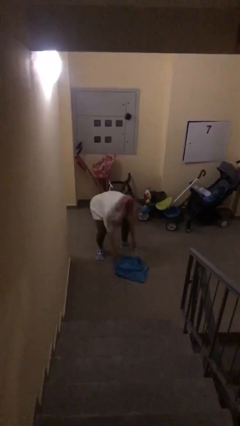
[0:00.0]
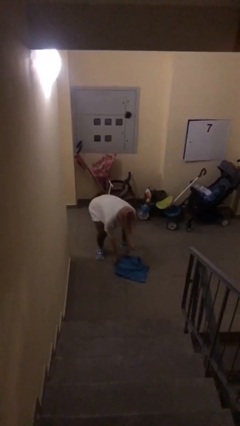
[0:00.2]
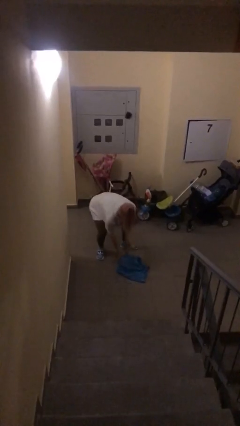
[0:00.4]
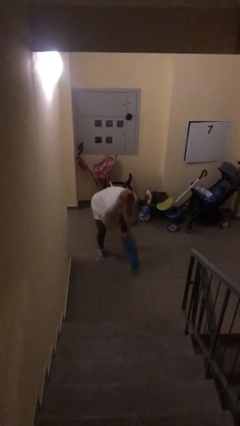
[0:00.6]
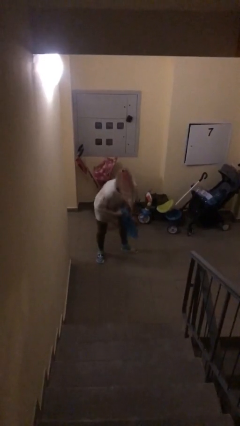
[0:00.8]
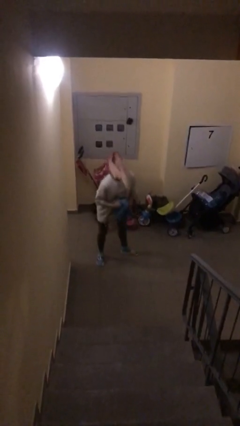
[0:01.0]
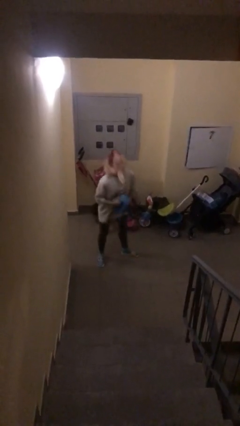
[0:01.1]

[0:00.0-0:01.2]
person picks up object from floor

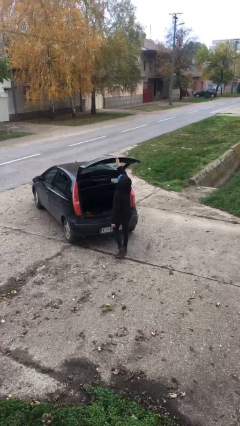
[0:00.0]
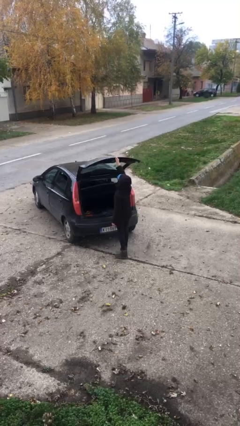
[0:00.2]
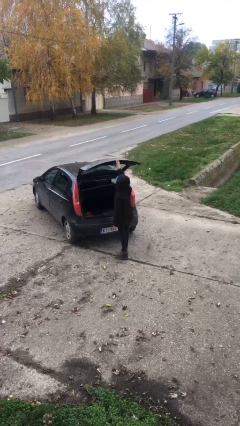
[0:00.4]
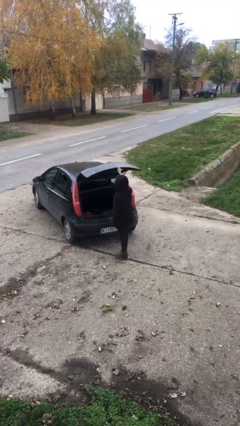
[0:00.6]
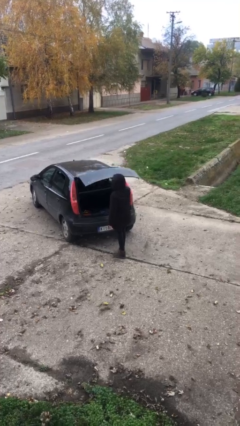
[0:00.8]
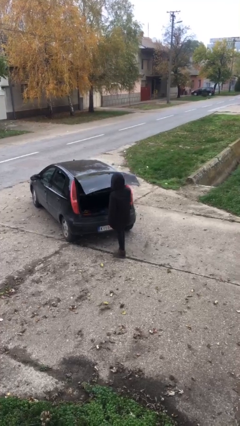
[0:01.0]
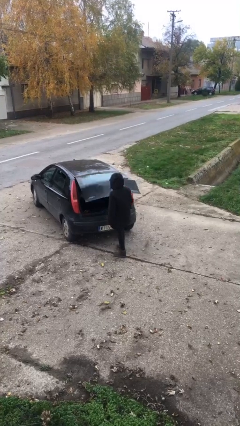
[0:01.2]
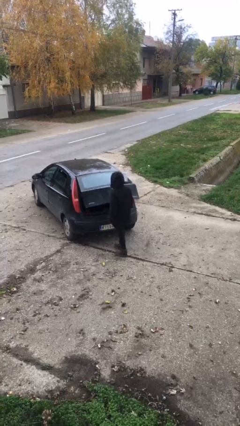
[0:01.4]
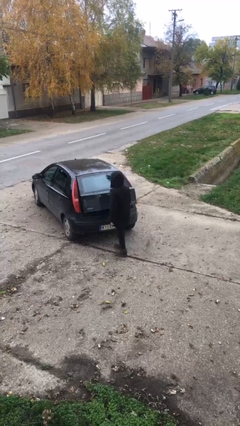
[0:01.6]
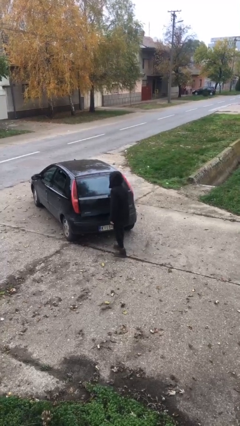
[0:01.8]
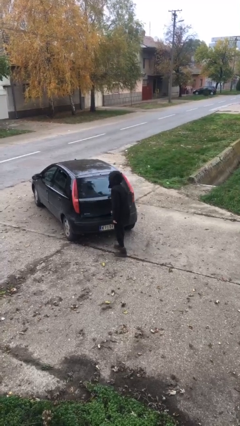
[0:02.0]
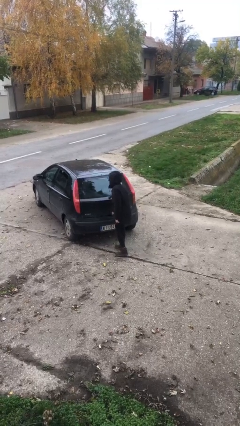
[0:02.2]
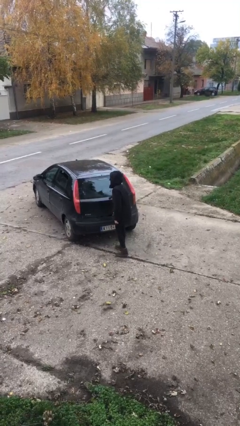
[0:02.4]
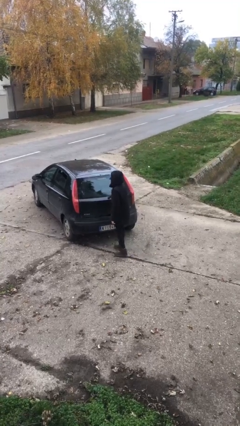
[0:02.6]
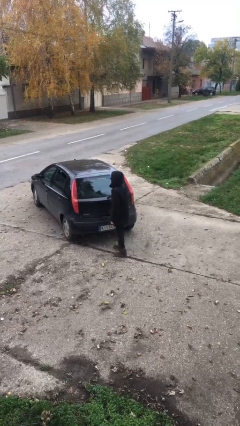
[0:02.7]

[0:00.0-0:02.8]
person closes car trunk

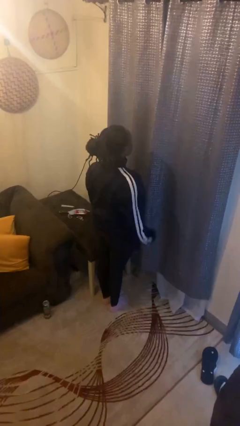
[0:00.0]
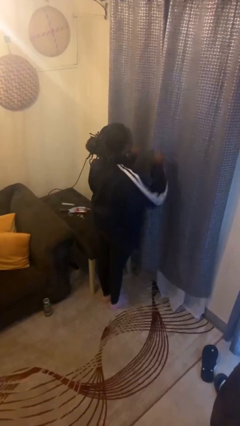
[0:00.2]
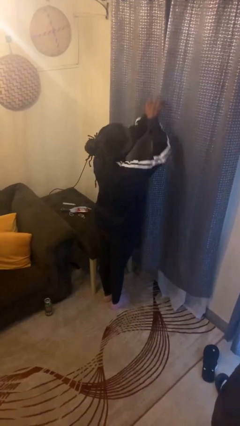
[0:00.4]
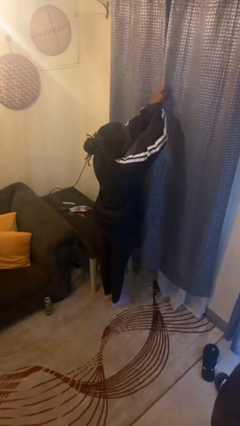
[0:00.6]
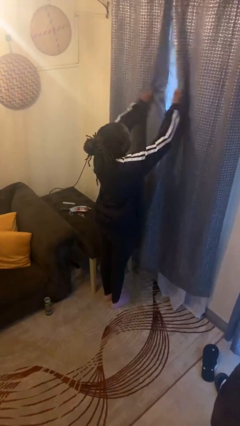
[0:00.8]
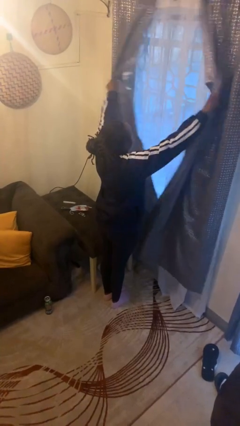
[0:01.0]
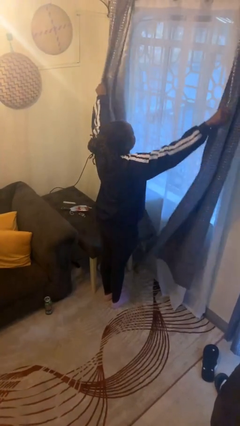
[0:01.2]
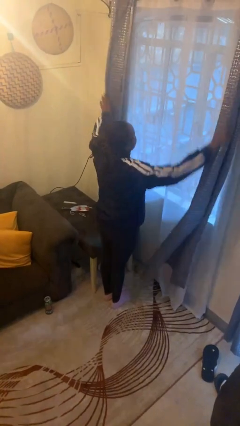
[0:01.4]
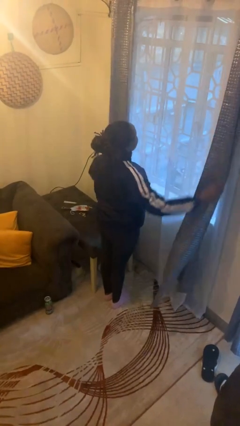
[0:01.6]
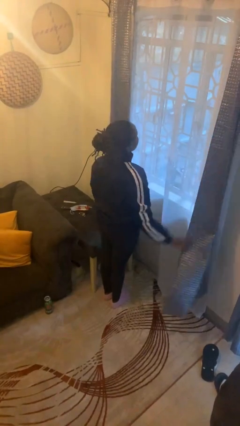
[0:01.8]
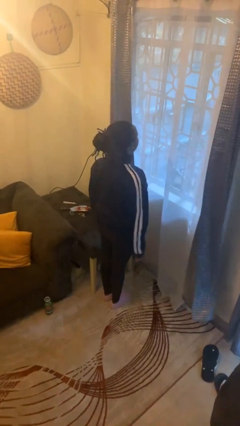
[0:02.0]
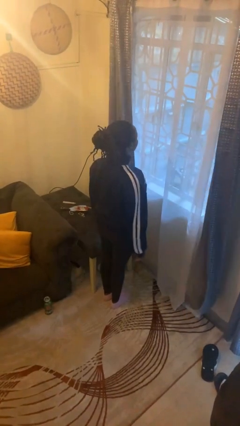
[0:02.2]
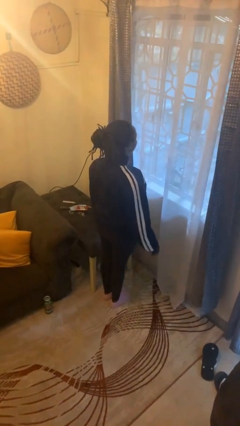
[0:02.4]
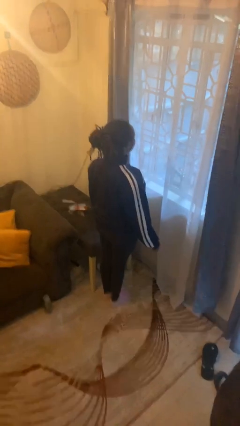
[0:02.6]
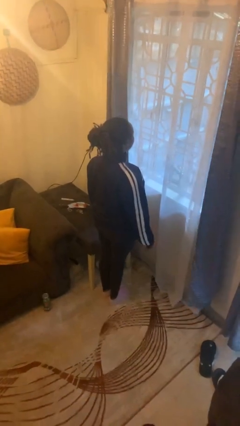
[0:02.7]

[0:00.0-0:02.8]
person opens curtains

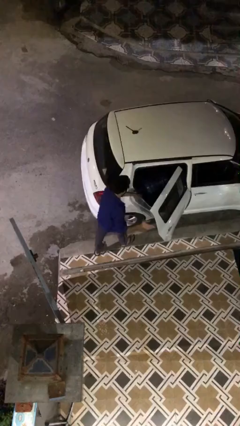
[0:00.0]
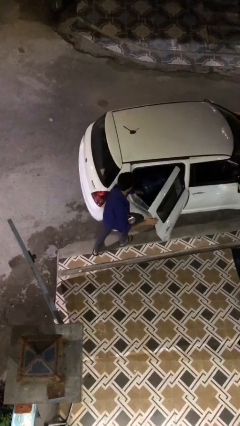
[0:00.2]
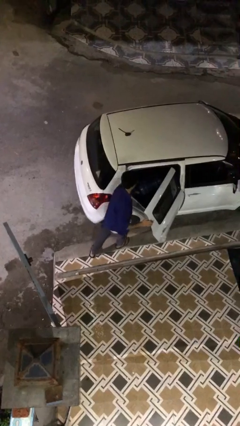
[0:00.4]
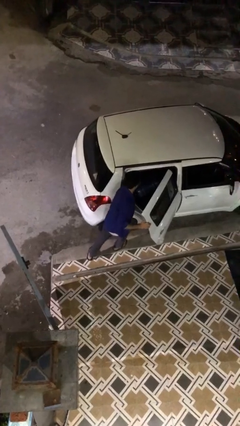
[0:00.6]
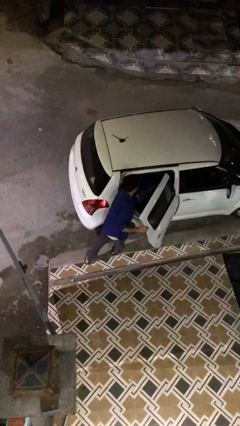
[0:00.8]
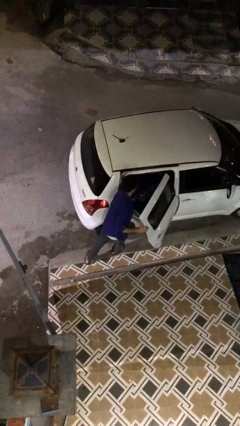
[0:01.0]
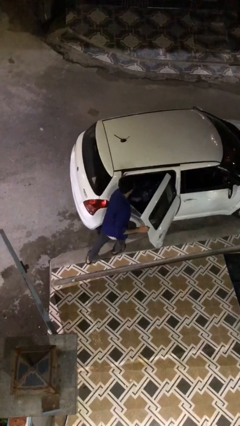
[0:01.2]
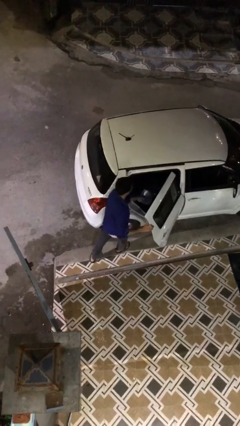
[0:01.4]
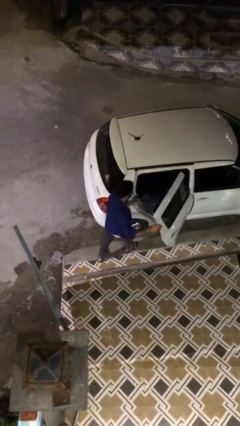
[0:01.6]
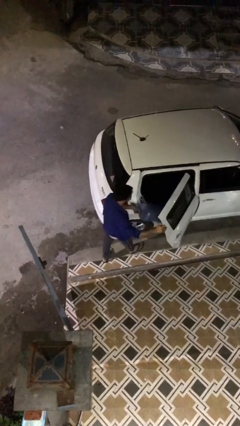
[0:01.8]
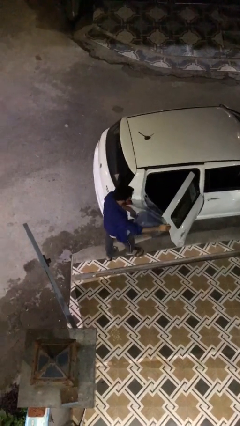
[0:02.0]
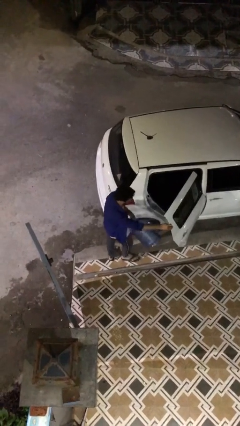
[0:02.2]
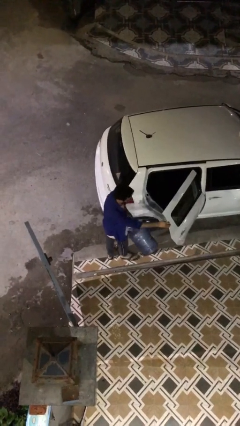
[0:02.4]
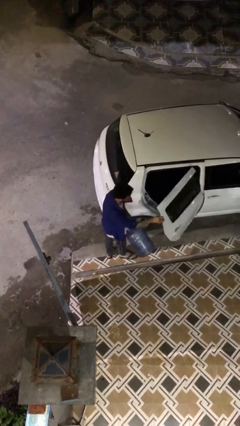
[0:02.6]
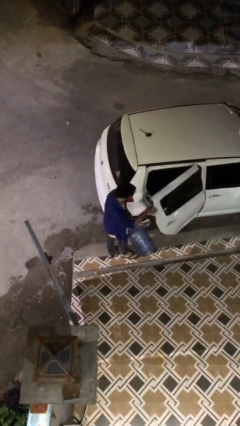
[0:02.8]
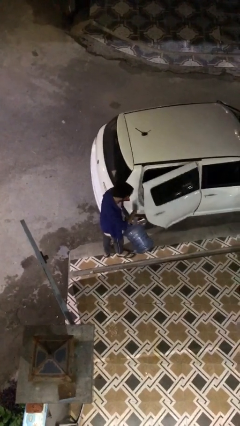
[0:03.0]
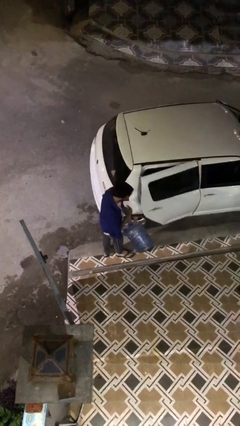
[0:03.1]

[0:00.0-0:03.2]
person unloads car

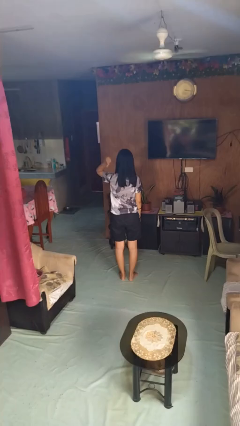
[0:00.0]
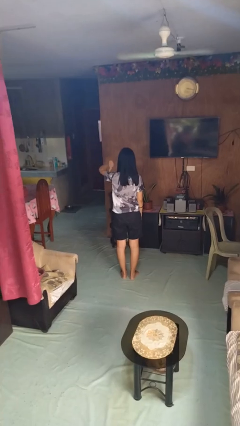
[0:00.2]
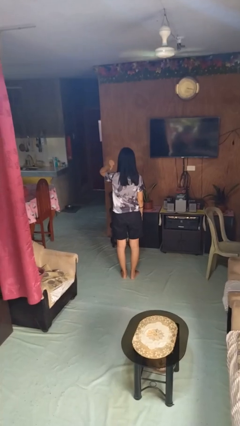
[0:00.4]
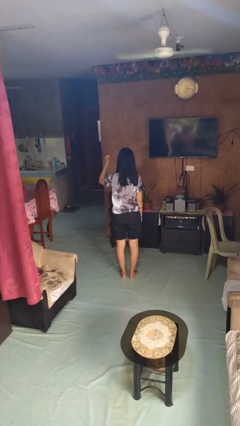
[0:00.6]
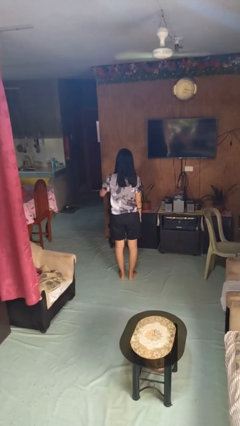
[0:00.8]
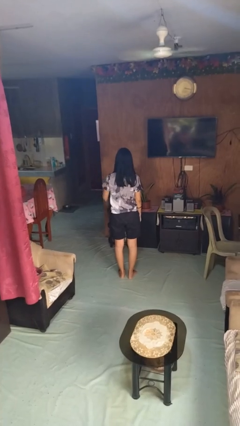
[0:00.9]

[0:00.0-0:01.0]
person gestures behind me

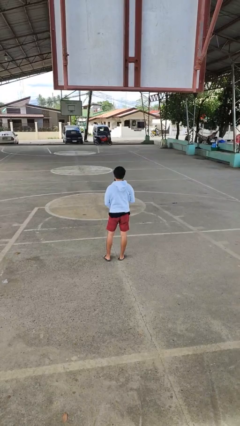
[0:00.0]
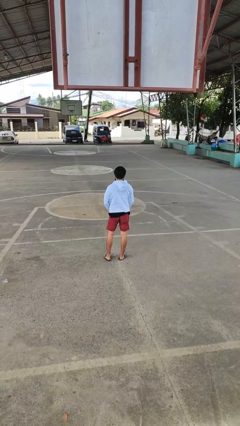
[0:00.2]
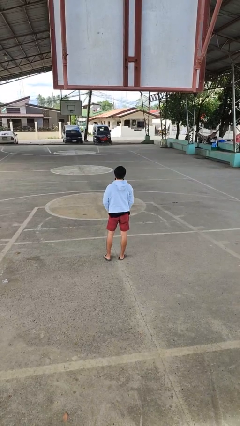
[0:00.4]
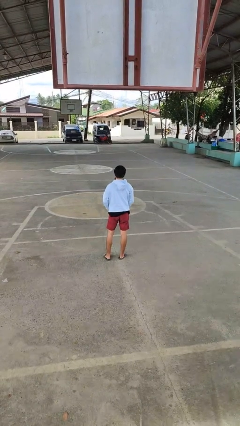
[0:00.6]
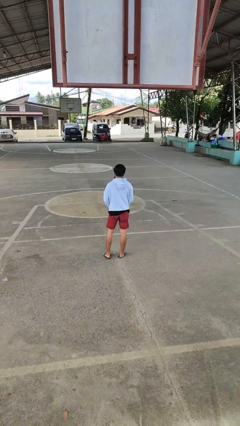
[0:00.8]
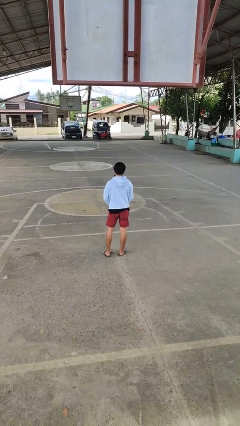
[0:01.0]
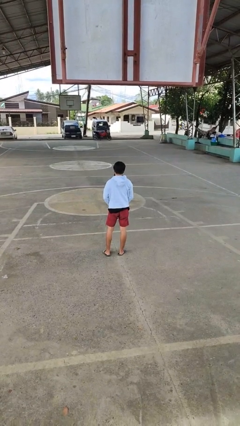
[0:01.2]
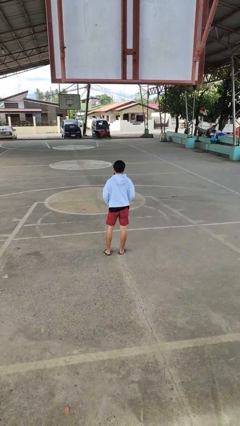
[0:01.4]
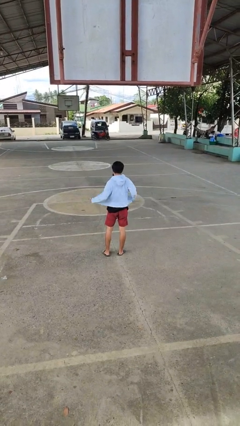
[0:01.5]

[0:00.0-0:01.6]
person unzips jacket

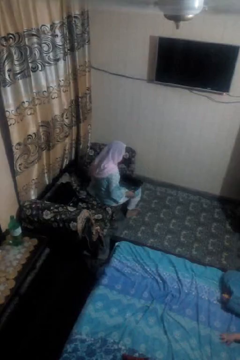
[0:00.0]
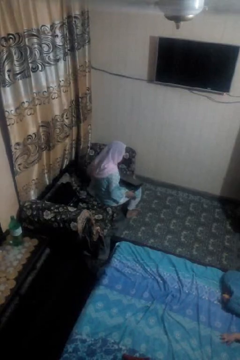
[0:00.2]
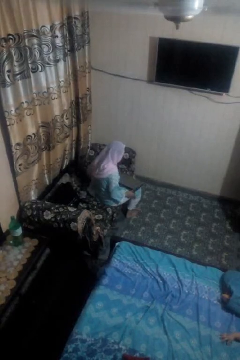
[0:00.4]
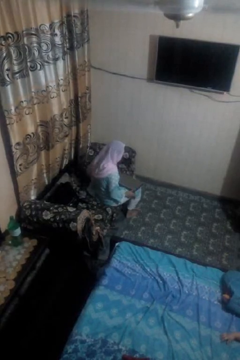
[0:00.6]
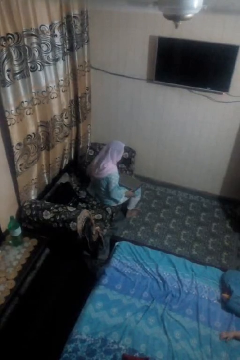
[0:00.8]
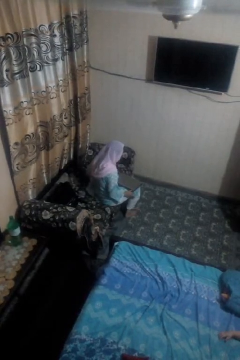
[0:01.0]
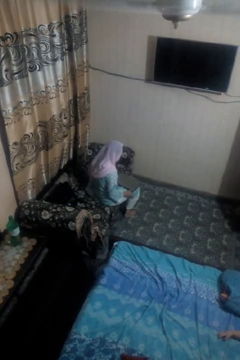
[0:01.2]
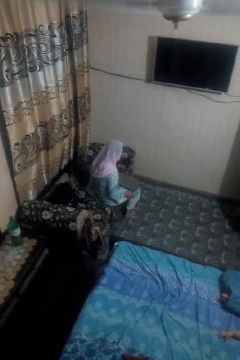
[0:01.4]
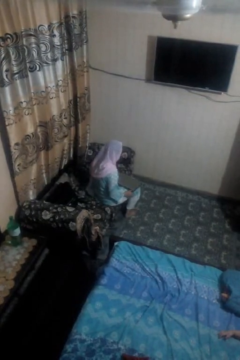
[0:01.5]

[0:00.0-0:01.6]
person closes laptop

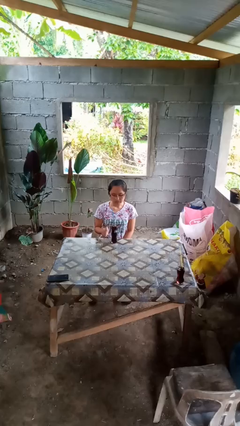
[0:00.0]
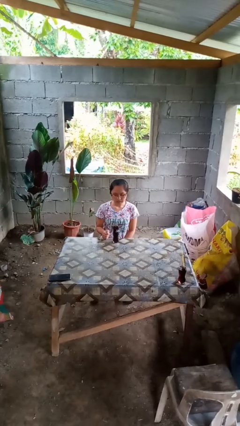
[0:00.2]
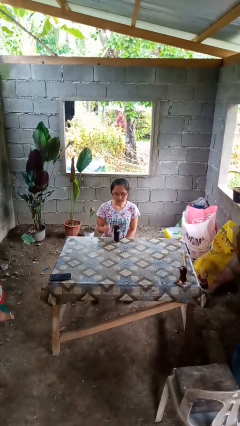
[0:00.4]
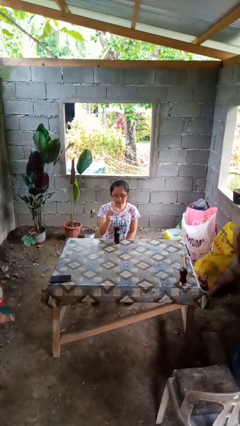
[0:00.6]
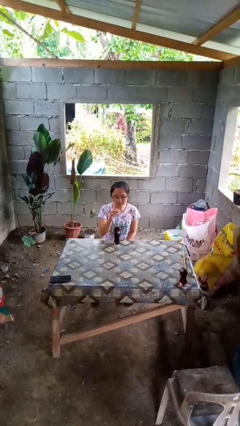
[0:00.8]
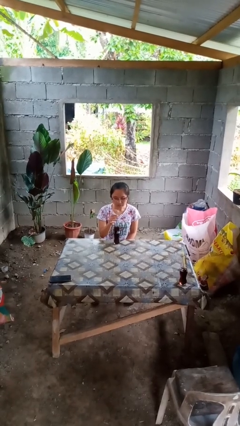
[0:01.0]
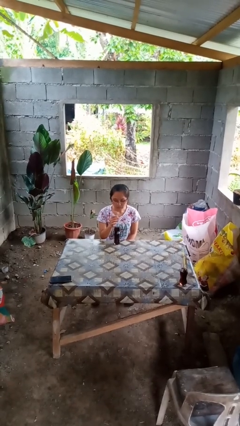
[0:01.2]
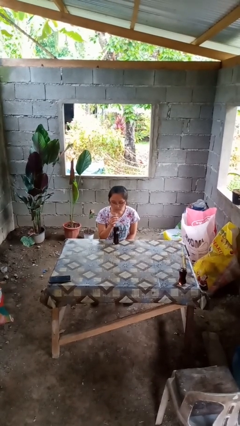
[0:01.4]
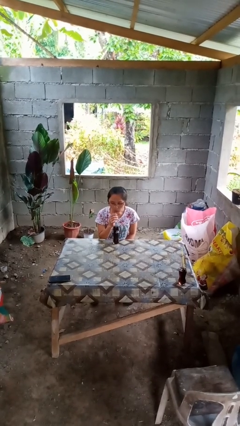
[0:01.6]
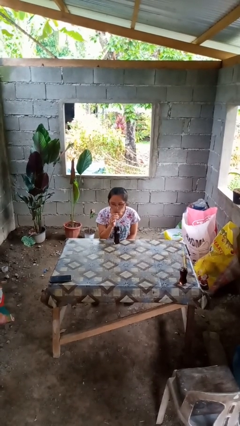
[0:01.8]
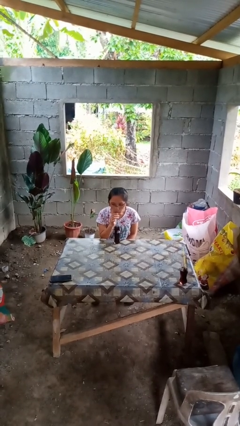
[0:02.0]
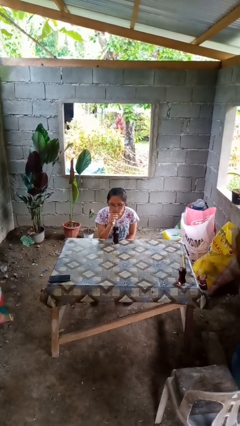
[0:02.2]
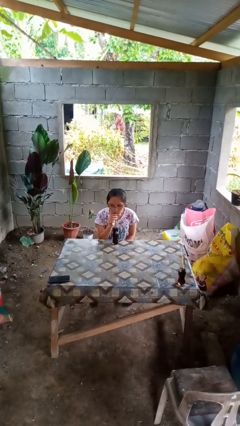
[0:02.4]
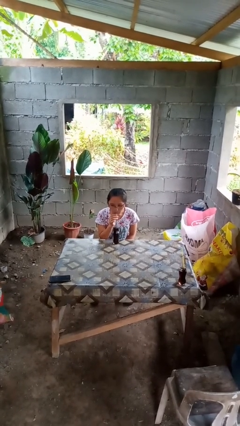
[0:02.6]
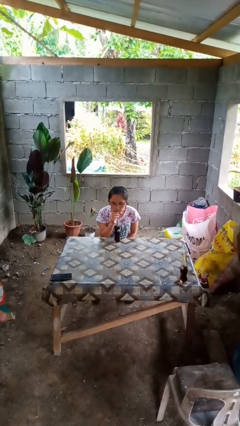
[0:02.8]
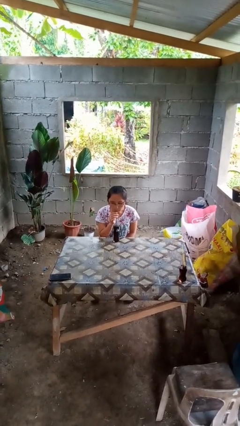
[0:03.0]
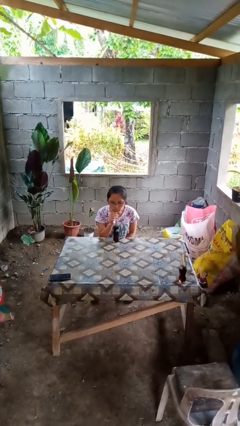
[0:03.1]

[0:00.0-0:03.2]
person drinks from straw
